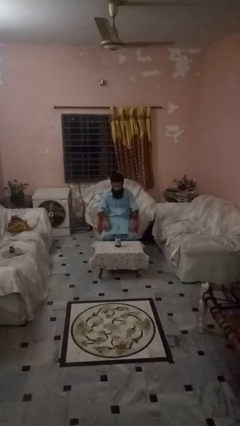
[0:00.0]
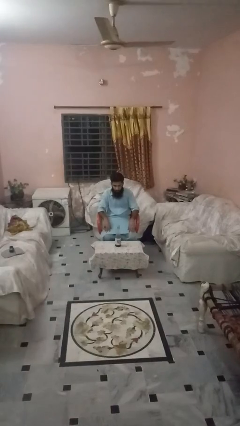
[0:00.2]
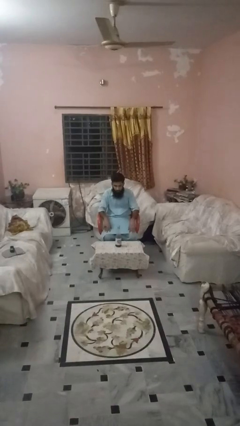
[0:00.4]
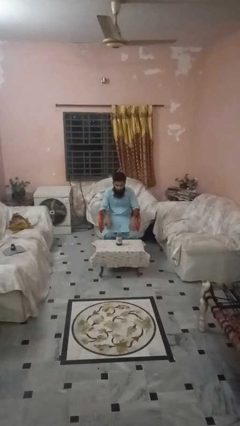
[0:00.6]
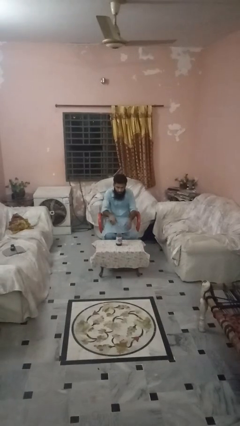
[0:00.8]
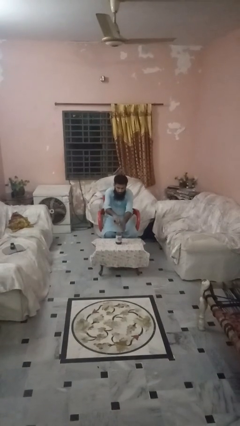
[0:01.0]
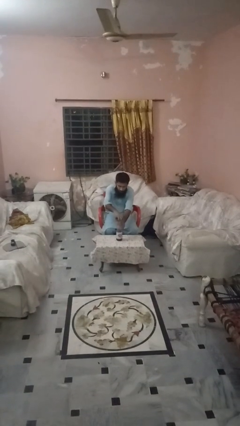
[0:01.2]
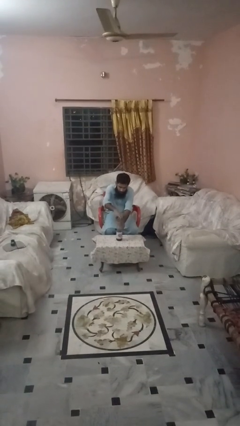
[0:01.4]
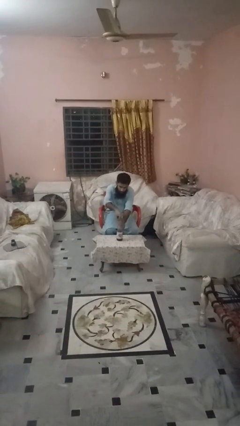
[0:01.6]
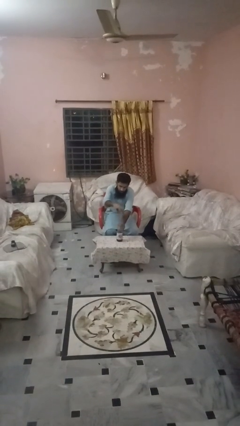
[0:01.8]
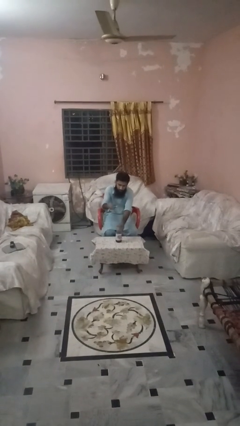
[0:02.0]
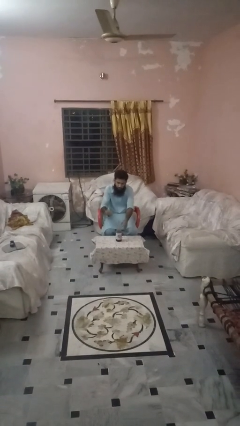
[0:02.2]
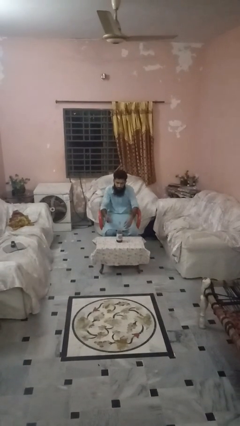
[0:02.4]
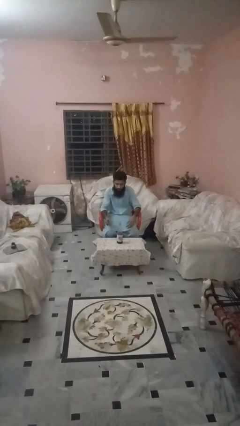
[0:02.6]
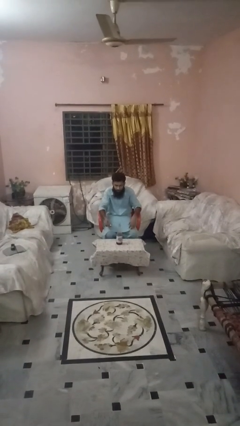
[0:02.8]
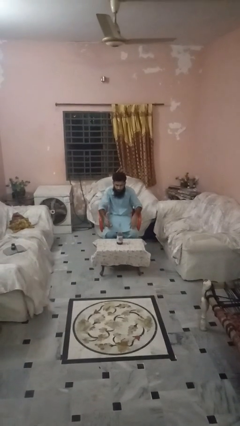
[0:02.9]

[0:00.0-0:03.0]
person unscrews lid from bottle

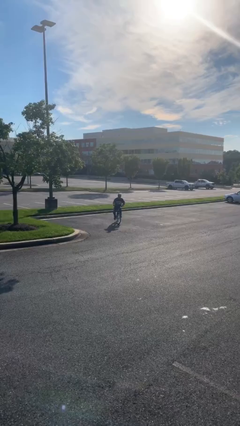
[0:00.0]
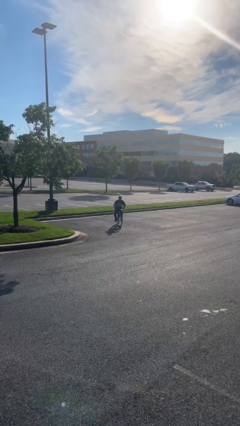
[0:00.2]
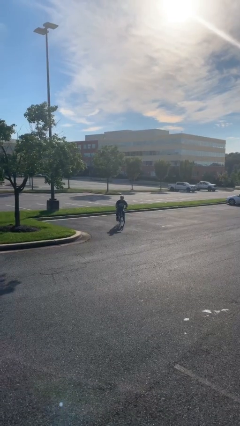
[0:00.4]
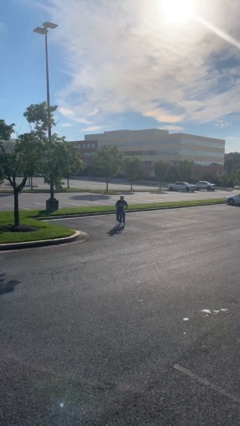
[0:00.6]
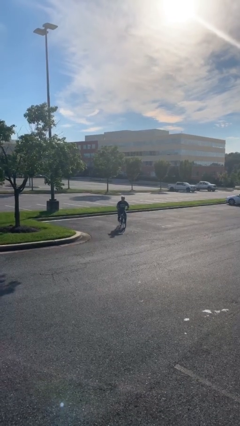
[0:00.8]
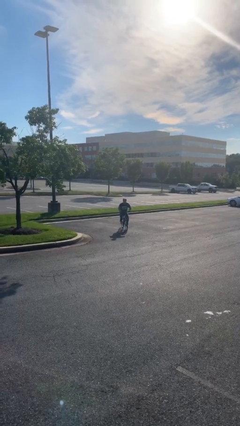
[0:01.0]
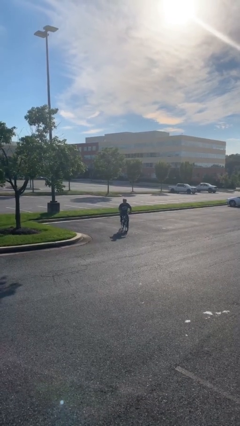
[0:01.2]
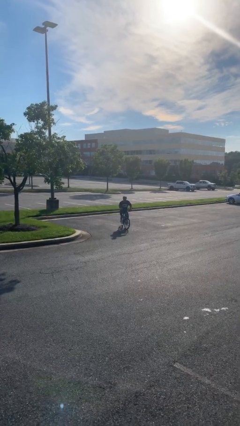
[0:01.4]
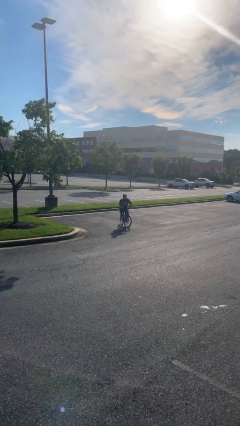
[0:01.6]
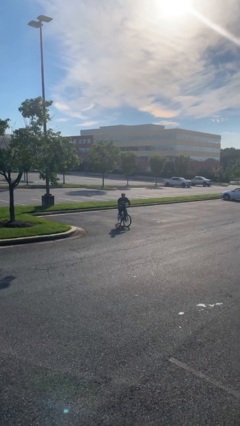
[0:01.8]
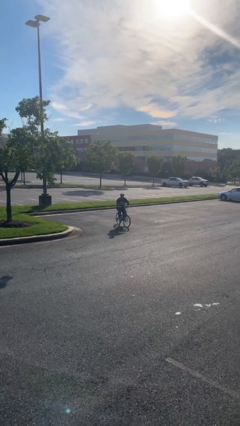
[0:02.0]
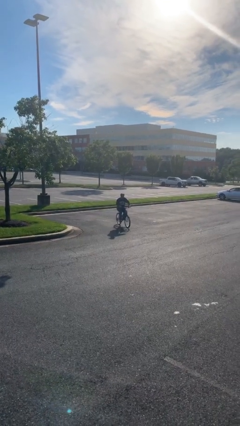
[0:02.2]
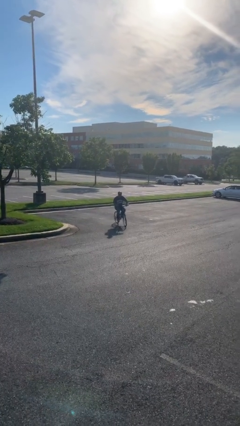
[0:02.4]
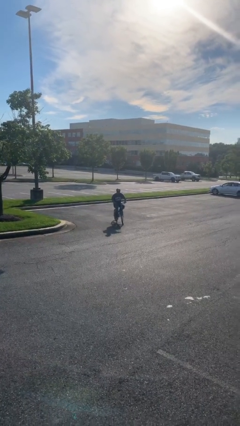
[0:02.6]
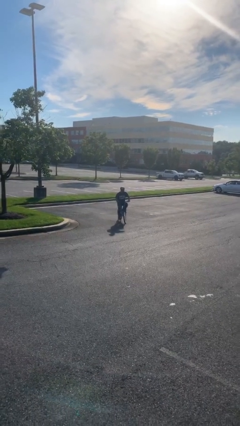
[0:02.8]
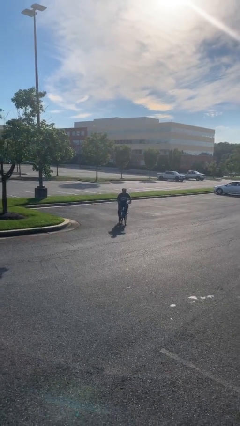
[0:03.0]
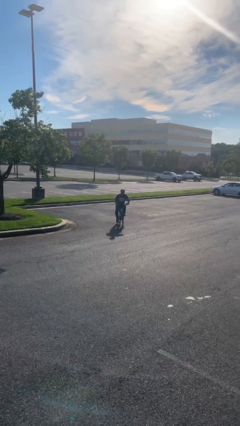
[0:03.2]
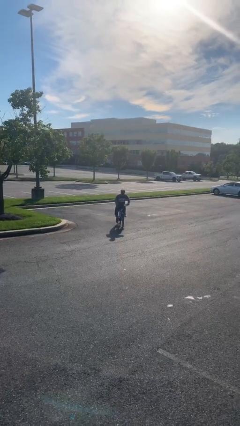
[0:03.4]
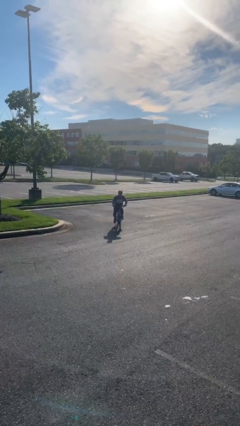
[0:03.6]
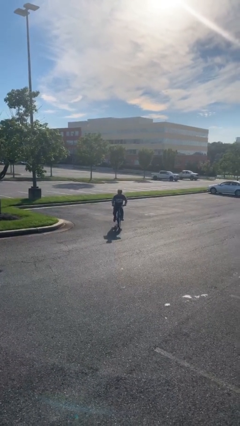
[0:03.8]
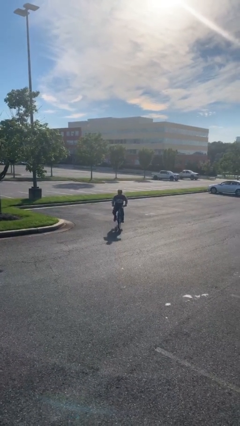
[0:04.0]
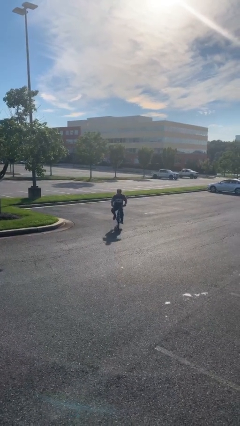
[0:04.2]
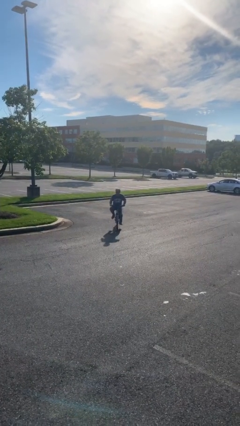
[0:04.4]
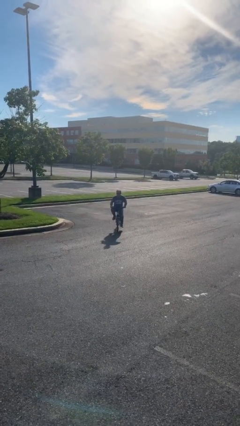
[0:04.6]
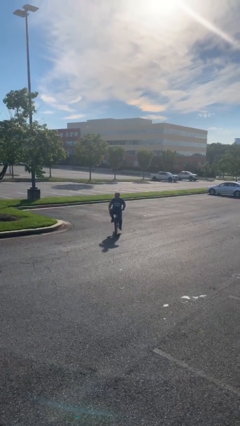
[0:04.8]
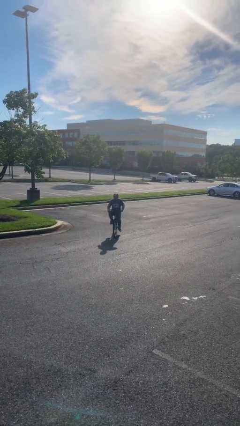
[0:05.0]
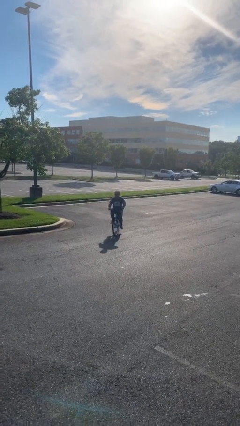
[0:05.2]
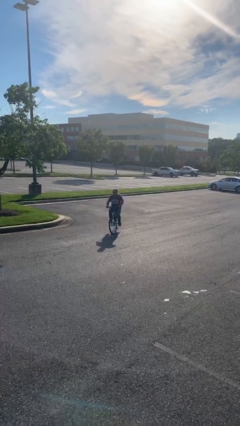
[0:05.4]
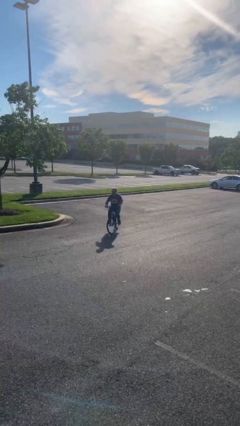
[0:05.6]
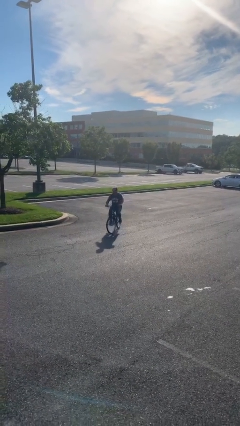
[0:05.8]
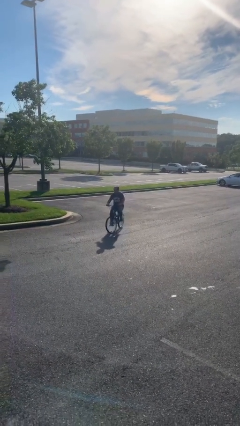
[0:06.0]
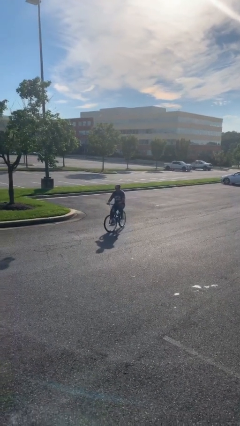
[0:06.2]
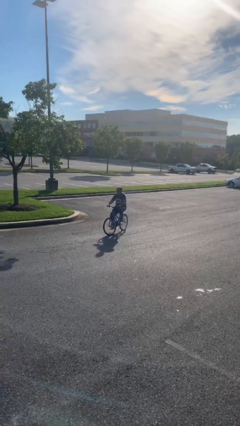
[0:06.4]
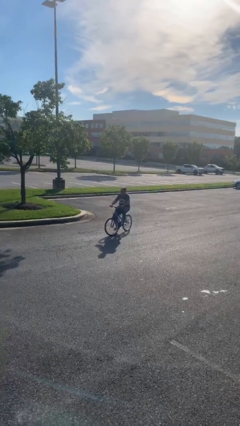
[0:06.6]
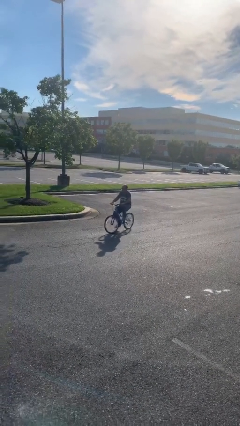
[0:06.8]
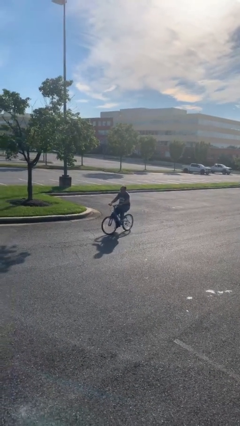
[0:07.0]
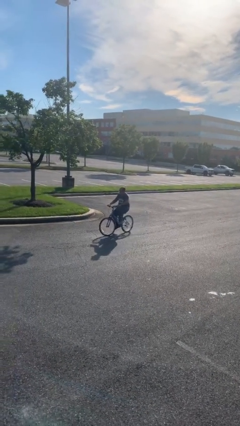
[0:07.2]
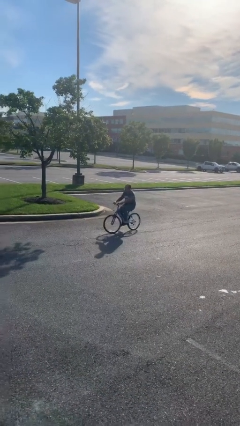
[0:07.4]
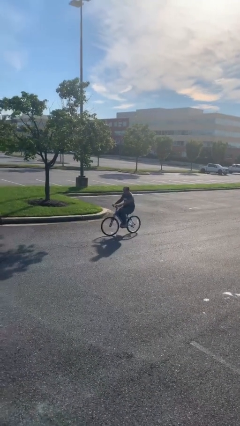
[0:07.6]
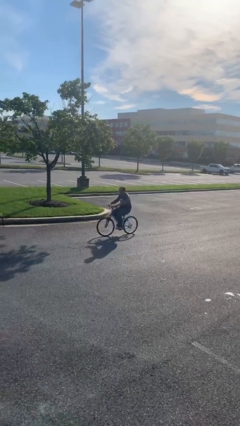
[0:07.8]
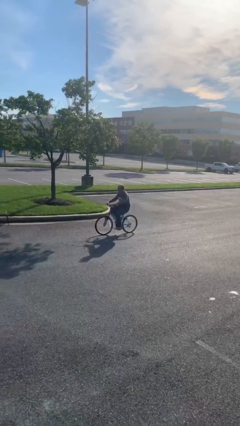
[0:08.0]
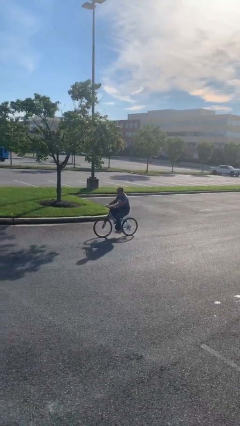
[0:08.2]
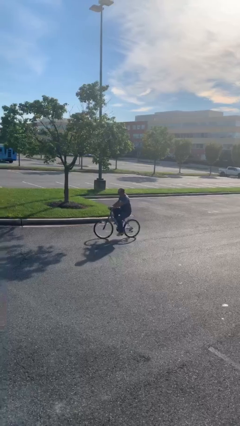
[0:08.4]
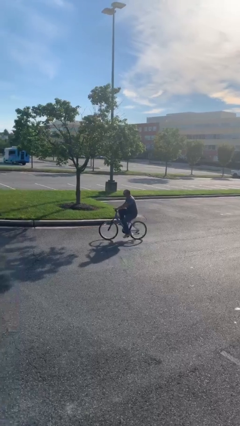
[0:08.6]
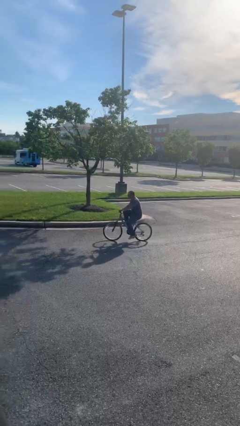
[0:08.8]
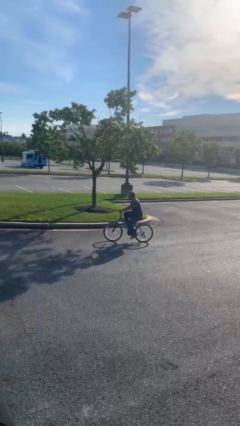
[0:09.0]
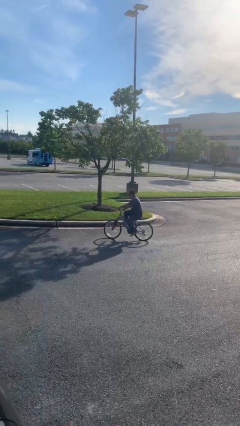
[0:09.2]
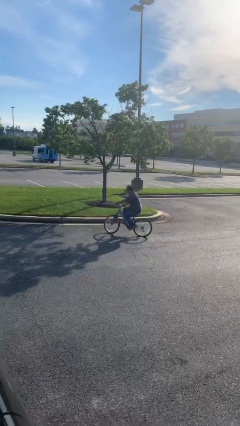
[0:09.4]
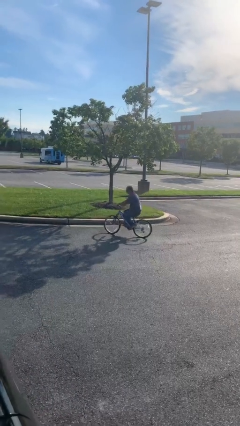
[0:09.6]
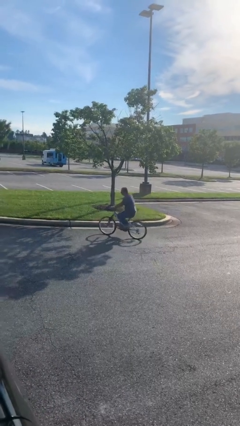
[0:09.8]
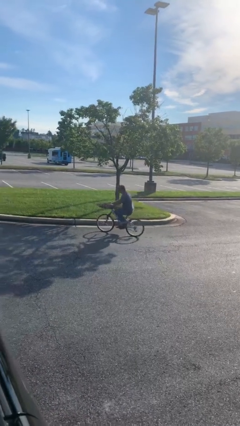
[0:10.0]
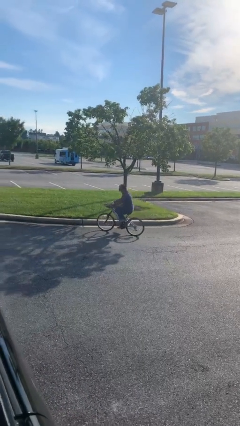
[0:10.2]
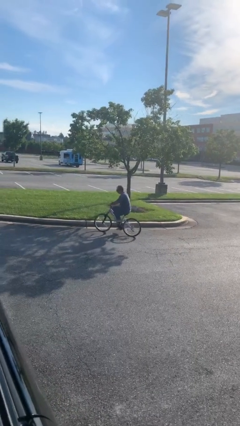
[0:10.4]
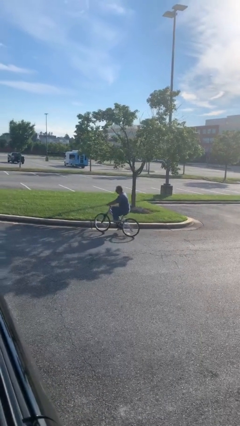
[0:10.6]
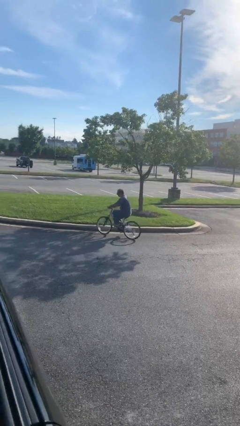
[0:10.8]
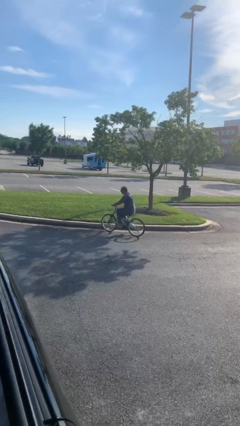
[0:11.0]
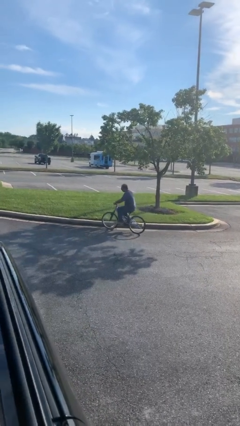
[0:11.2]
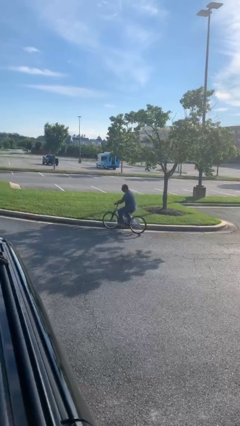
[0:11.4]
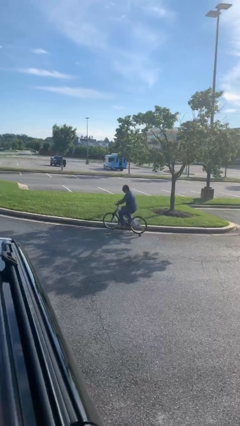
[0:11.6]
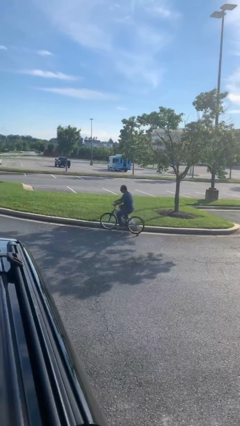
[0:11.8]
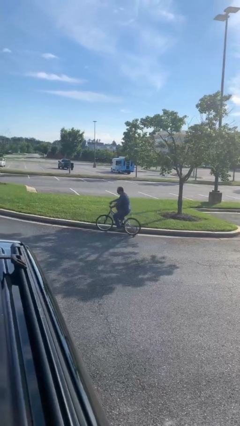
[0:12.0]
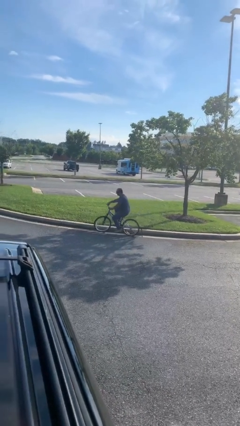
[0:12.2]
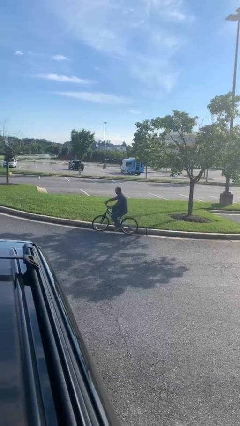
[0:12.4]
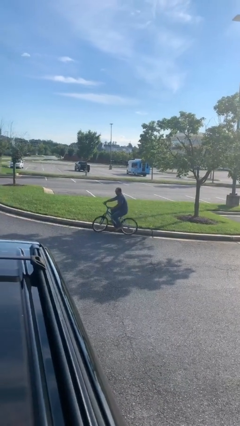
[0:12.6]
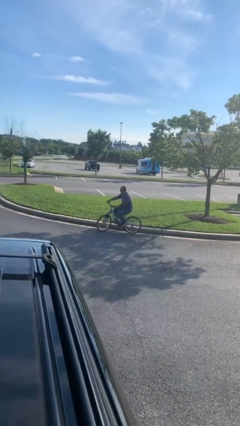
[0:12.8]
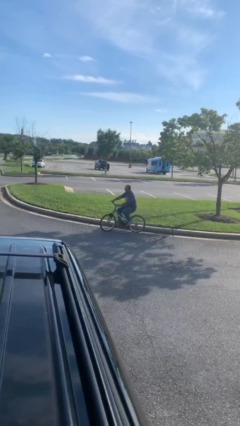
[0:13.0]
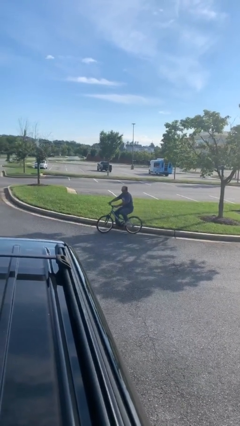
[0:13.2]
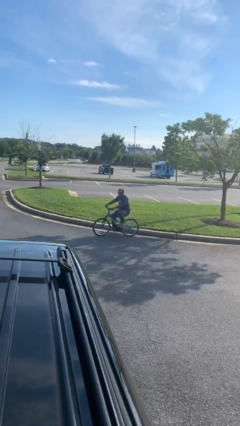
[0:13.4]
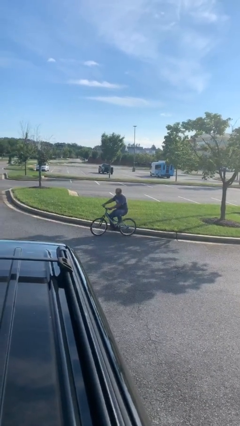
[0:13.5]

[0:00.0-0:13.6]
person rides bicycle

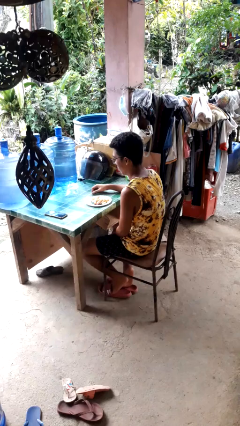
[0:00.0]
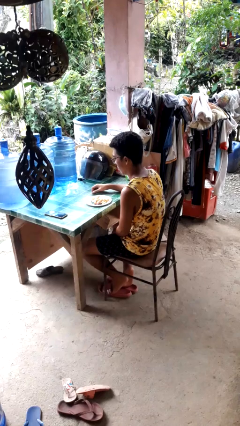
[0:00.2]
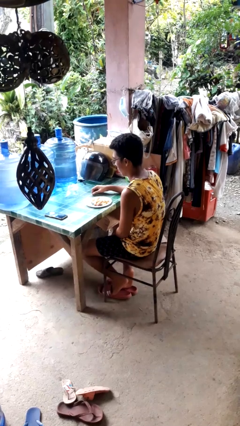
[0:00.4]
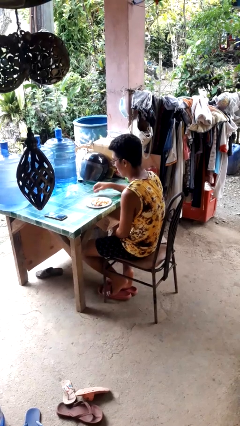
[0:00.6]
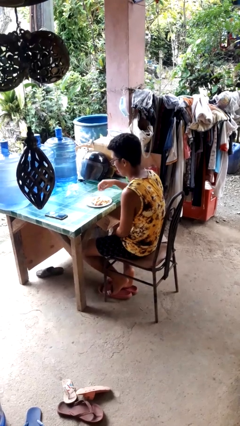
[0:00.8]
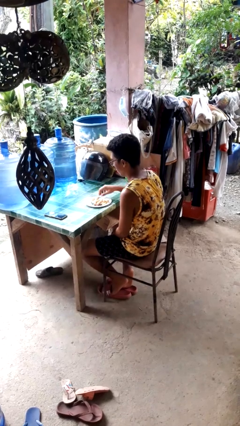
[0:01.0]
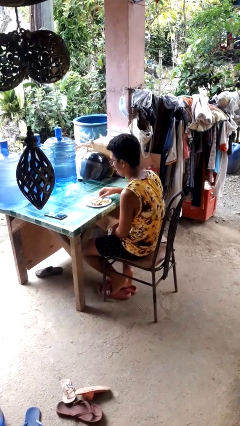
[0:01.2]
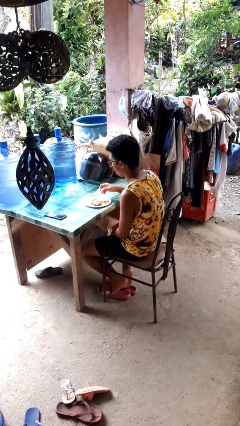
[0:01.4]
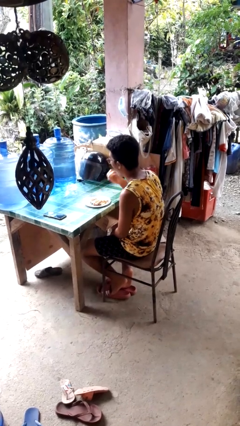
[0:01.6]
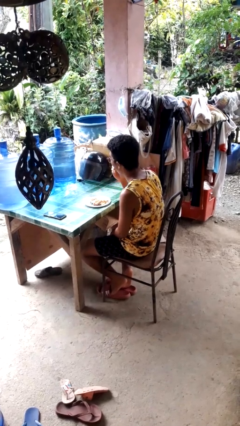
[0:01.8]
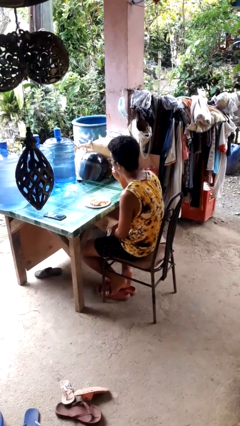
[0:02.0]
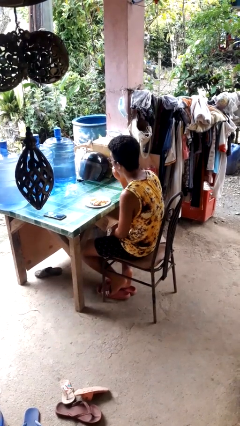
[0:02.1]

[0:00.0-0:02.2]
person eats with hands
